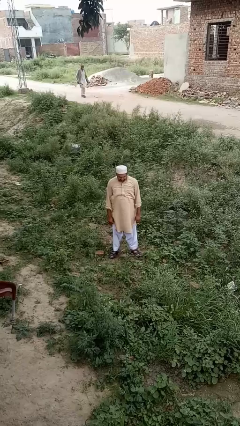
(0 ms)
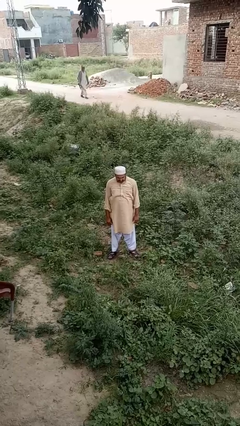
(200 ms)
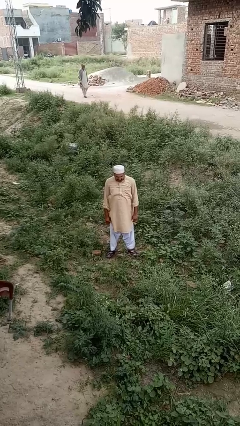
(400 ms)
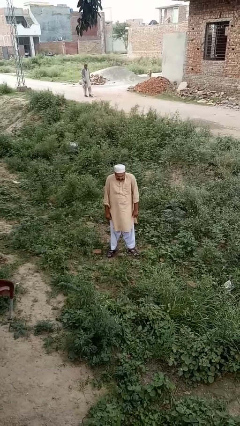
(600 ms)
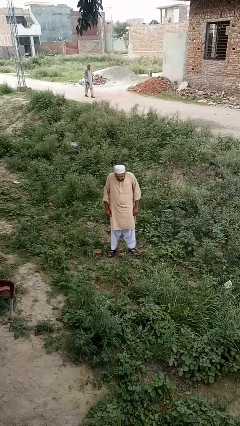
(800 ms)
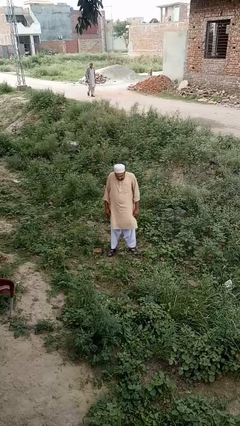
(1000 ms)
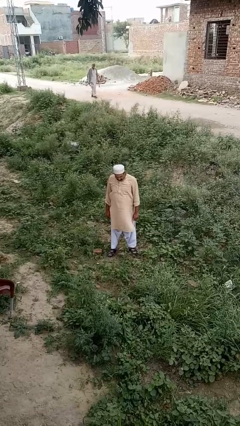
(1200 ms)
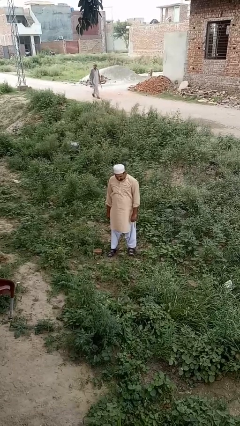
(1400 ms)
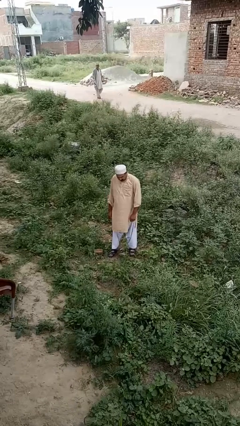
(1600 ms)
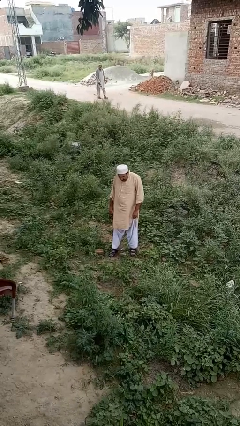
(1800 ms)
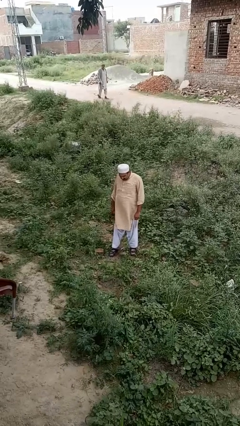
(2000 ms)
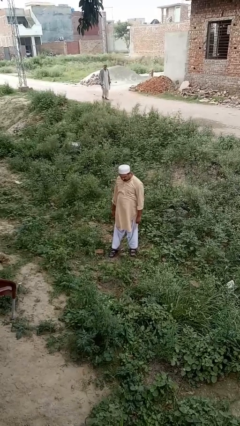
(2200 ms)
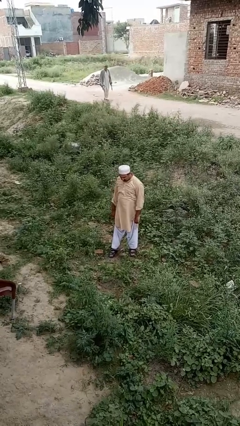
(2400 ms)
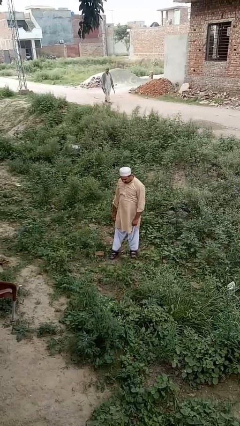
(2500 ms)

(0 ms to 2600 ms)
person shrugs

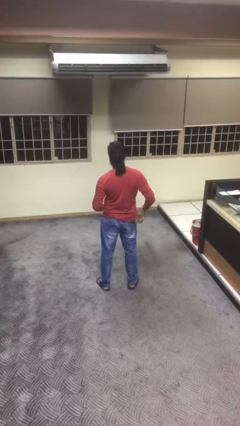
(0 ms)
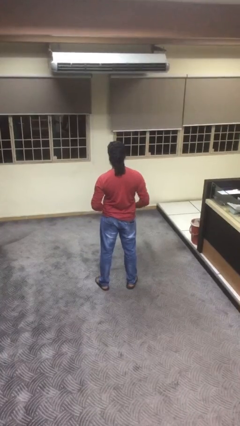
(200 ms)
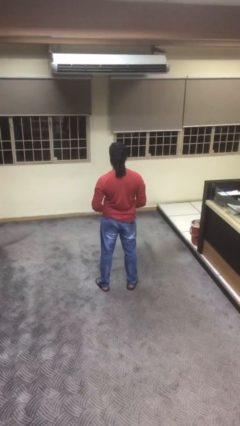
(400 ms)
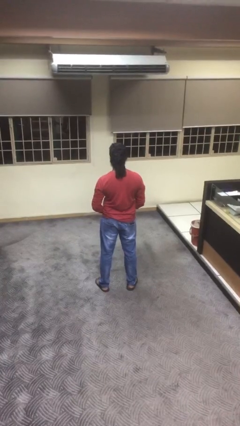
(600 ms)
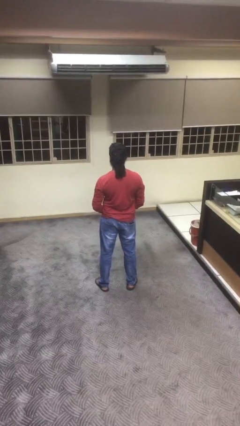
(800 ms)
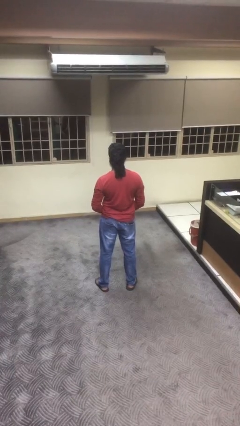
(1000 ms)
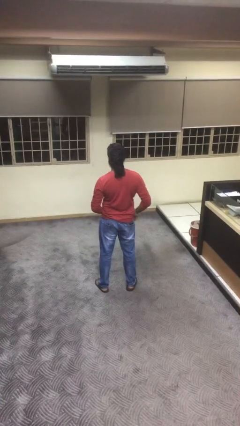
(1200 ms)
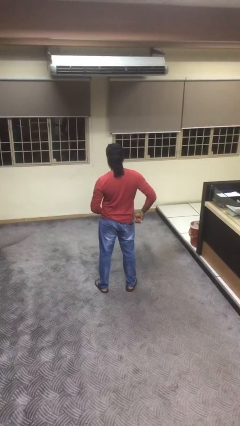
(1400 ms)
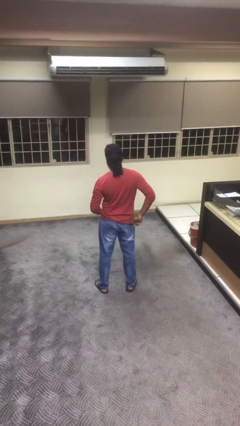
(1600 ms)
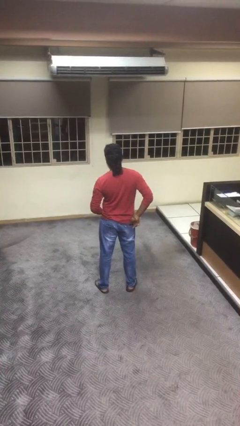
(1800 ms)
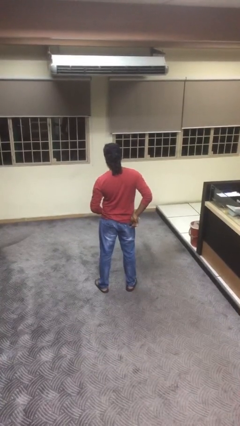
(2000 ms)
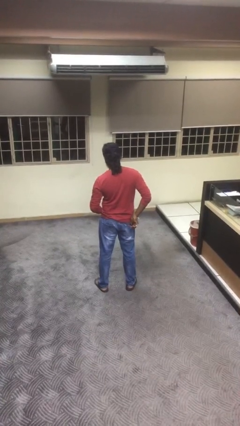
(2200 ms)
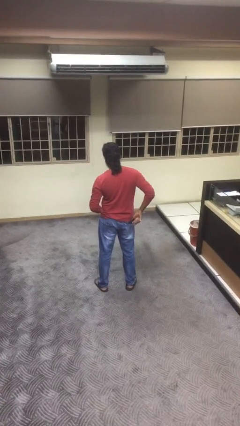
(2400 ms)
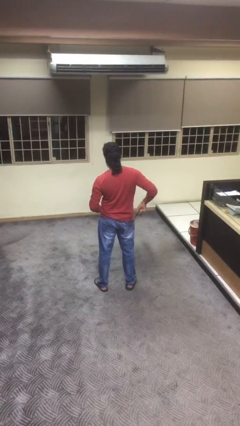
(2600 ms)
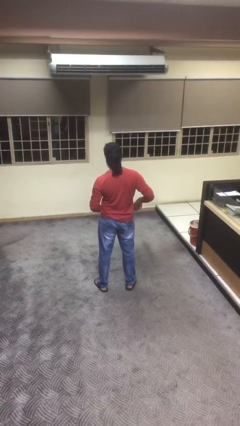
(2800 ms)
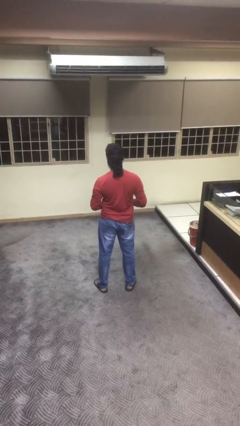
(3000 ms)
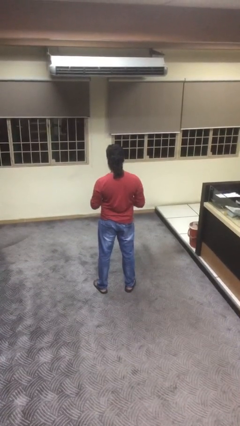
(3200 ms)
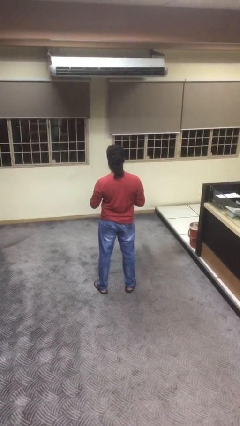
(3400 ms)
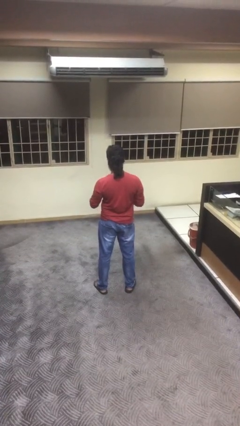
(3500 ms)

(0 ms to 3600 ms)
person takes phone from pocket

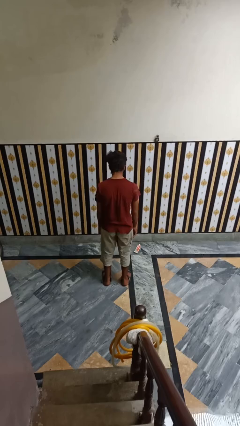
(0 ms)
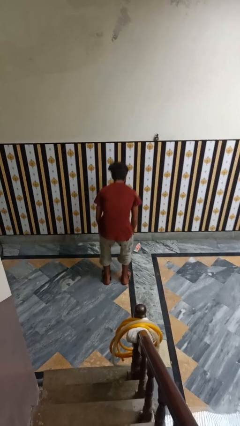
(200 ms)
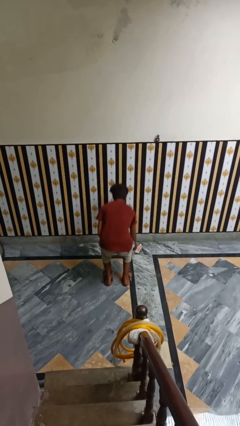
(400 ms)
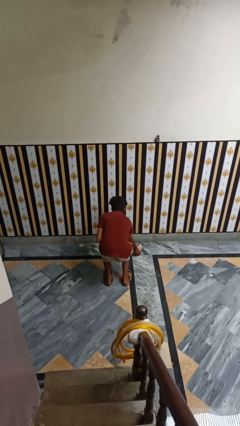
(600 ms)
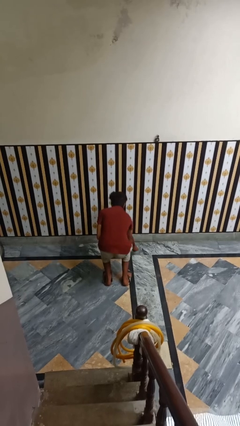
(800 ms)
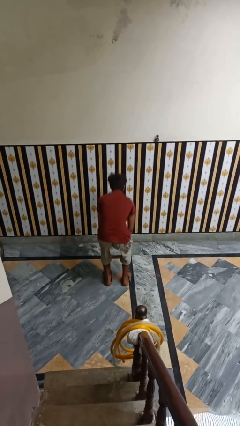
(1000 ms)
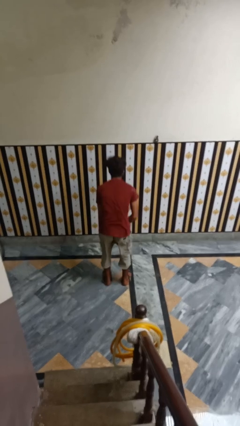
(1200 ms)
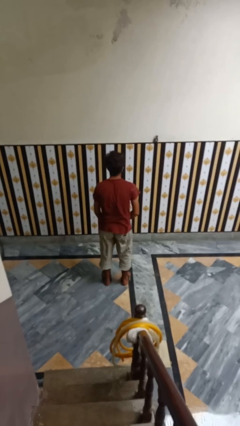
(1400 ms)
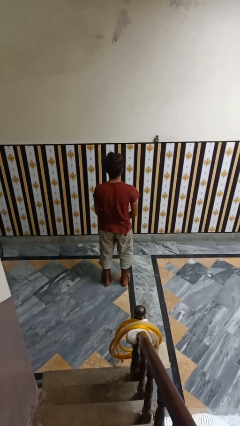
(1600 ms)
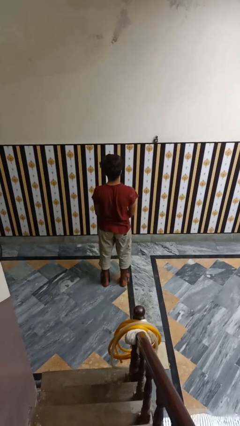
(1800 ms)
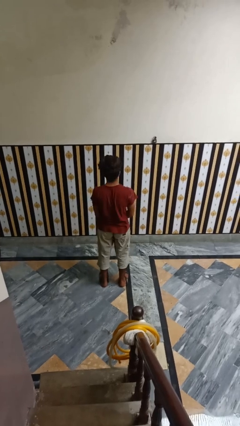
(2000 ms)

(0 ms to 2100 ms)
person picks up object from floor

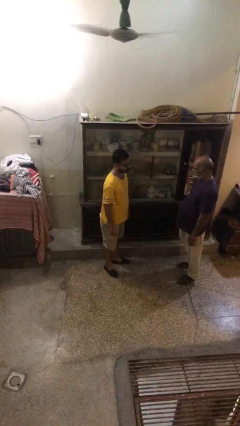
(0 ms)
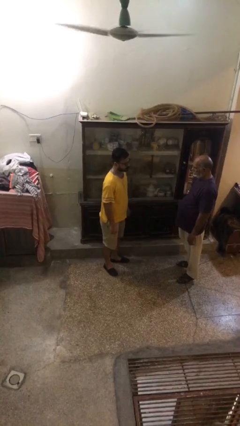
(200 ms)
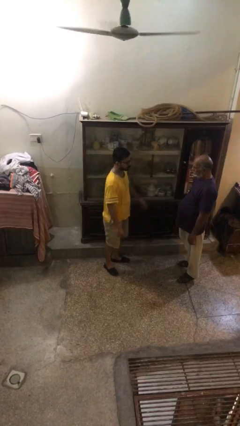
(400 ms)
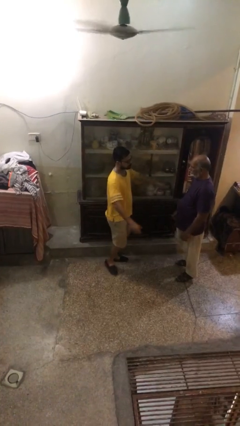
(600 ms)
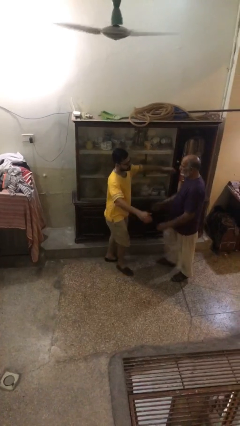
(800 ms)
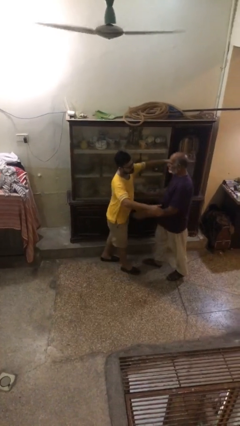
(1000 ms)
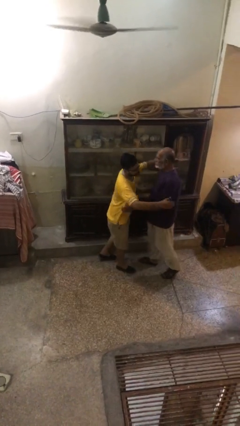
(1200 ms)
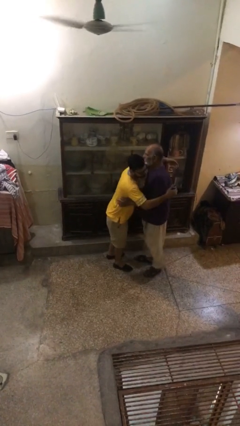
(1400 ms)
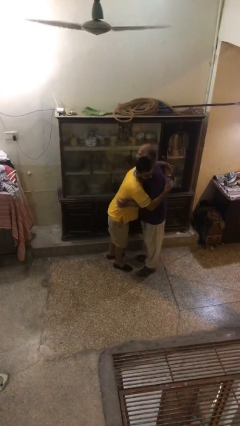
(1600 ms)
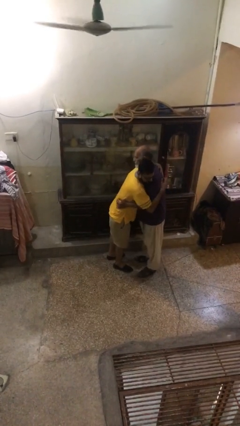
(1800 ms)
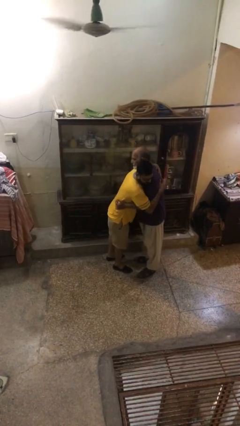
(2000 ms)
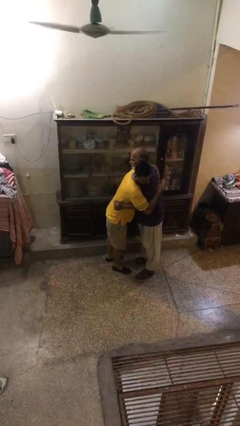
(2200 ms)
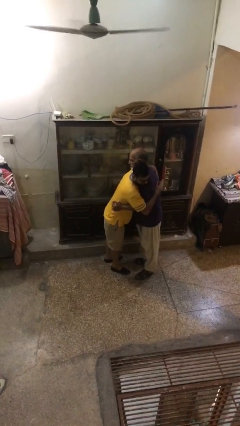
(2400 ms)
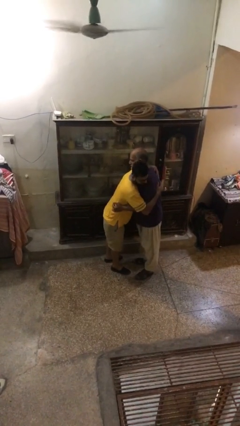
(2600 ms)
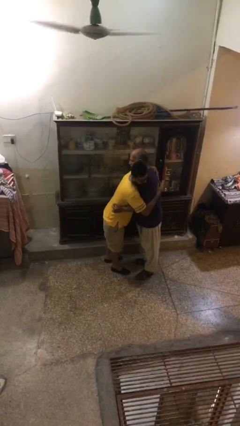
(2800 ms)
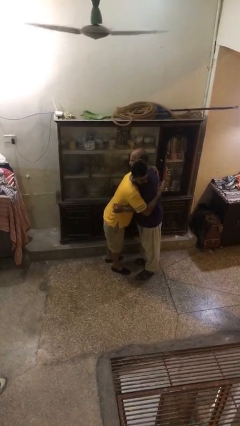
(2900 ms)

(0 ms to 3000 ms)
person embraces person

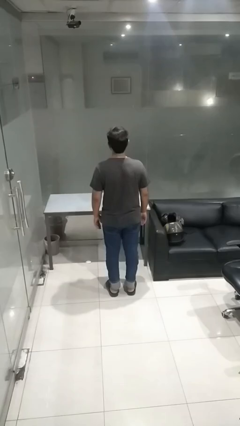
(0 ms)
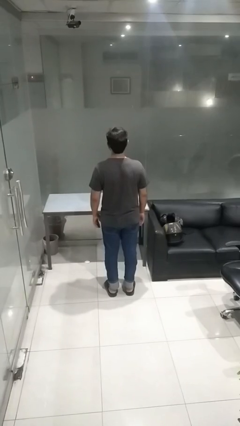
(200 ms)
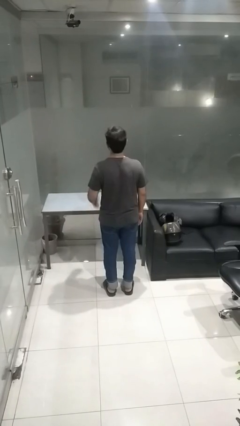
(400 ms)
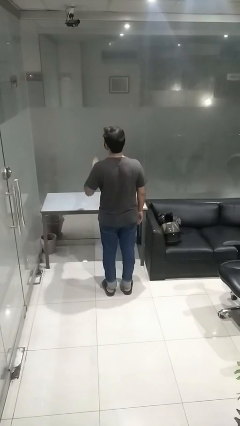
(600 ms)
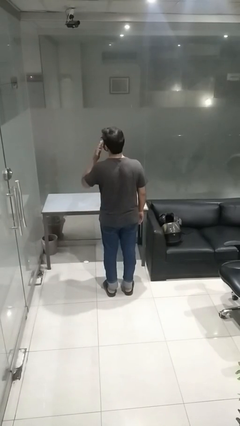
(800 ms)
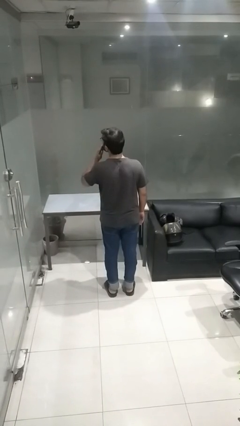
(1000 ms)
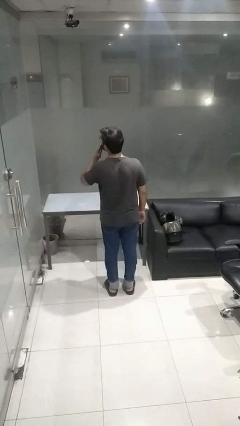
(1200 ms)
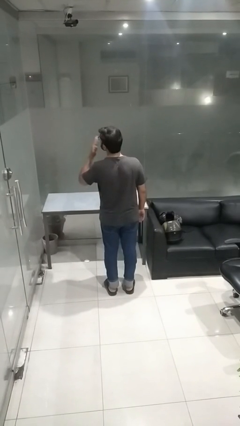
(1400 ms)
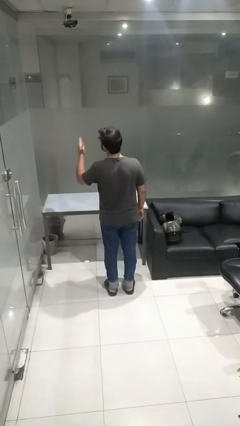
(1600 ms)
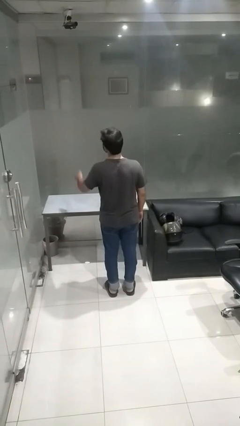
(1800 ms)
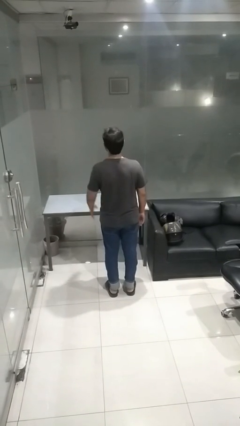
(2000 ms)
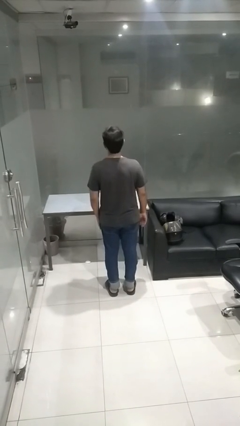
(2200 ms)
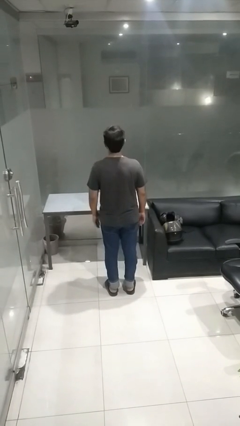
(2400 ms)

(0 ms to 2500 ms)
person gestures blow kiss

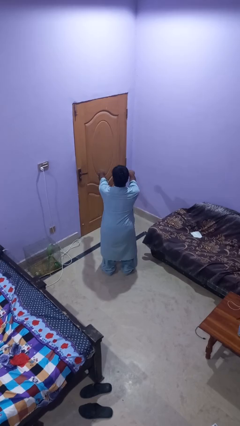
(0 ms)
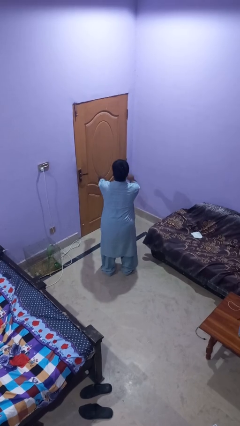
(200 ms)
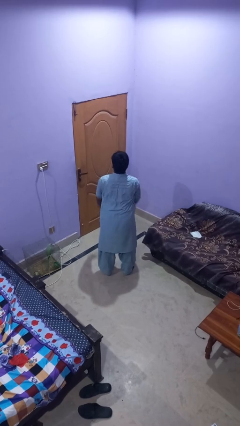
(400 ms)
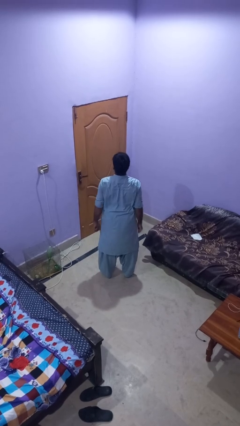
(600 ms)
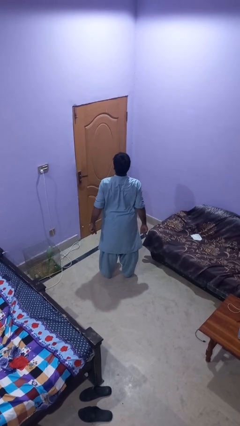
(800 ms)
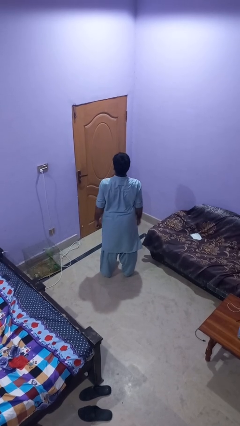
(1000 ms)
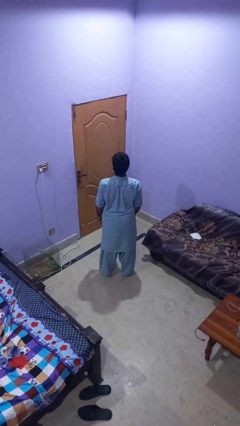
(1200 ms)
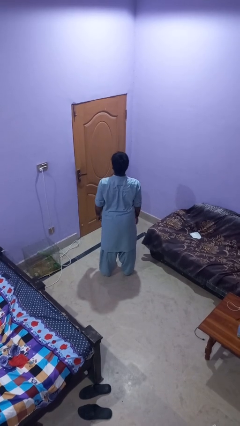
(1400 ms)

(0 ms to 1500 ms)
person stands up

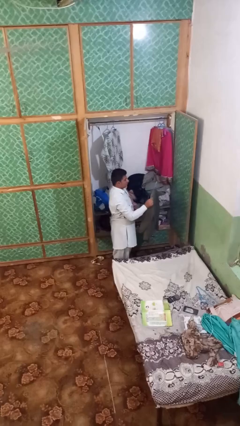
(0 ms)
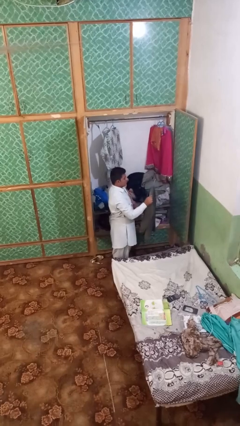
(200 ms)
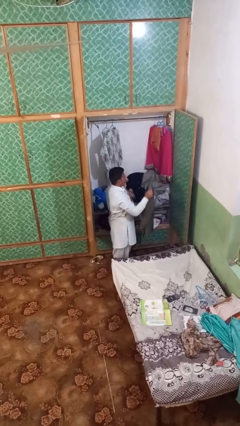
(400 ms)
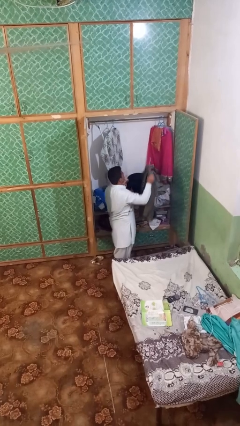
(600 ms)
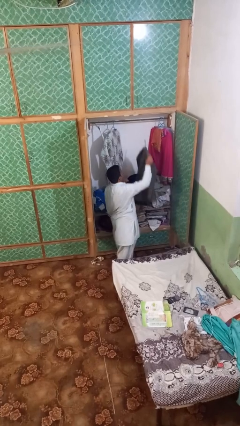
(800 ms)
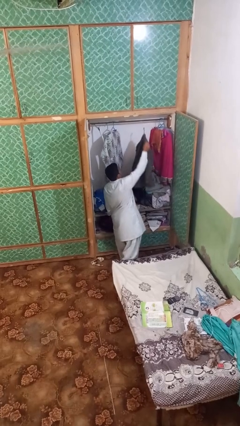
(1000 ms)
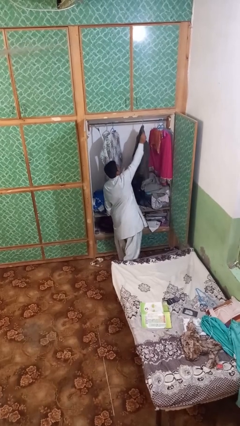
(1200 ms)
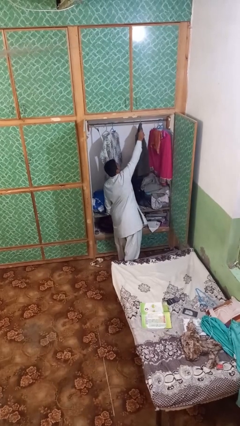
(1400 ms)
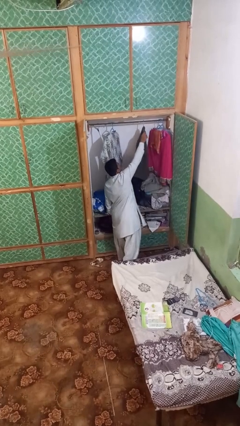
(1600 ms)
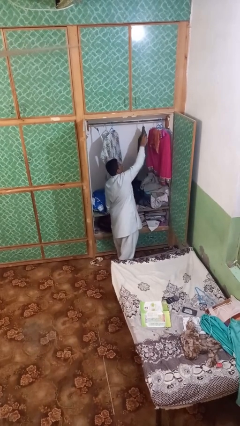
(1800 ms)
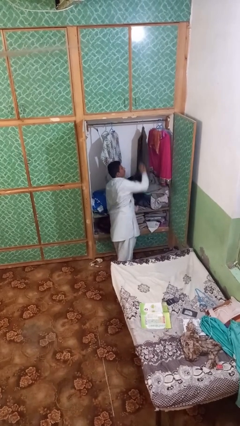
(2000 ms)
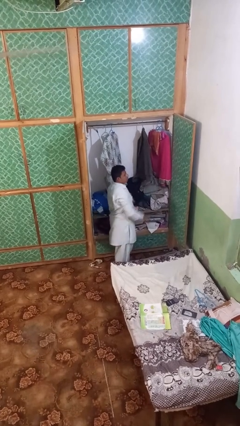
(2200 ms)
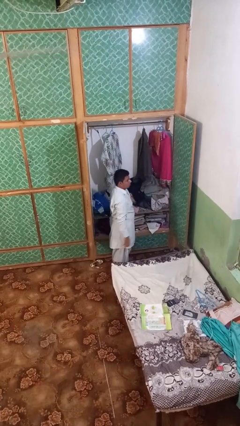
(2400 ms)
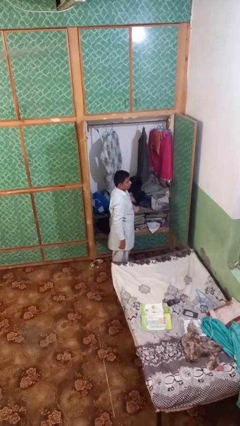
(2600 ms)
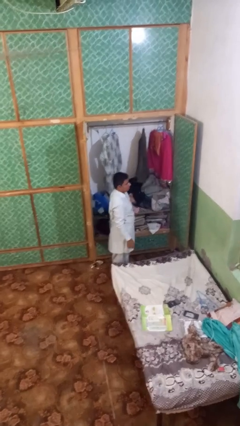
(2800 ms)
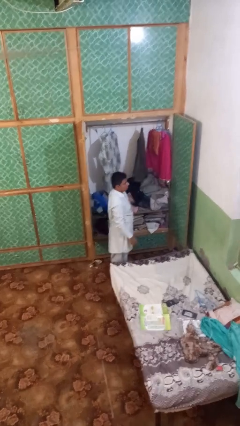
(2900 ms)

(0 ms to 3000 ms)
person puts clothes into closet
